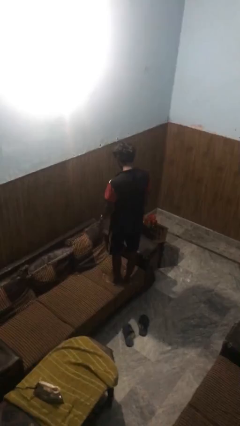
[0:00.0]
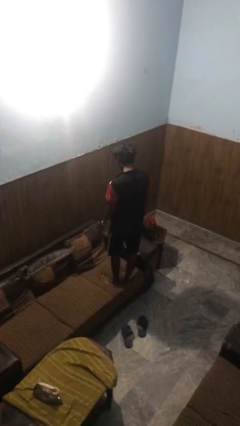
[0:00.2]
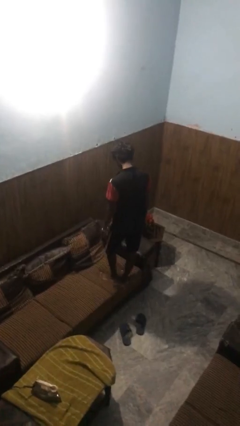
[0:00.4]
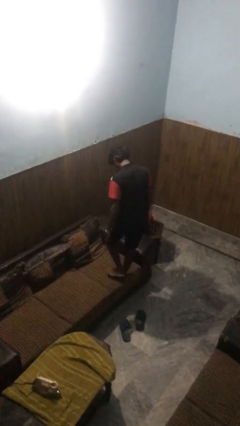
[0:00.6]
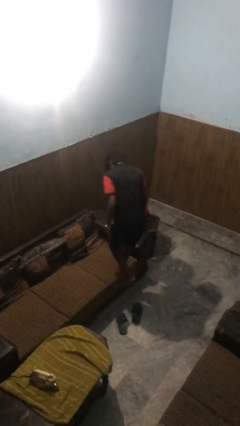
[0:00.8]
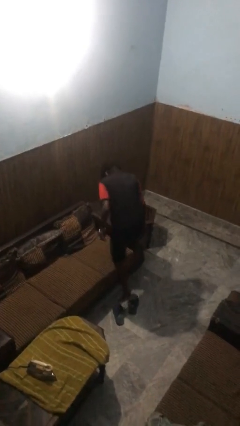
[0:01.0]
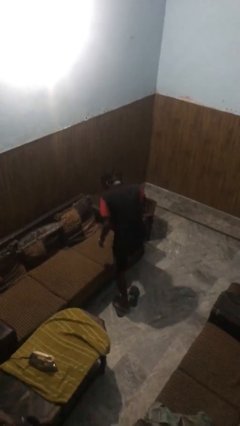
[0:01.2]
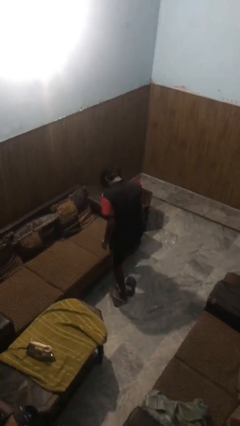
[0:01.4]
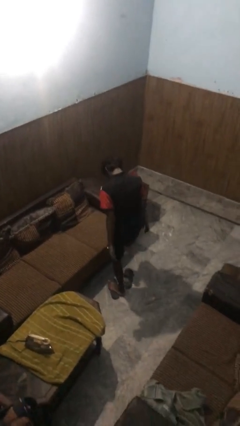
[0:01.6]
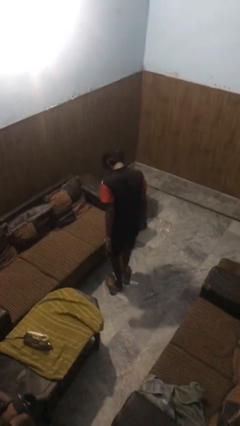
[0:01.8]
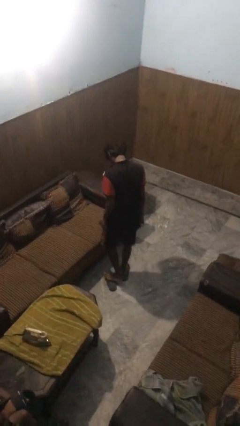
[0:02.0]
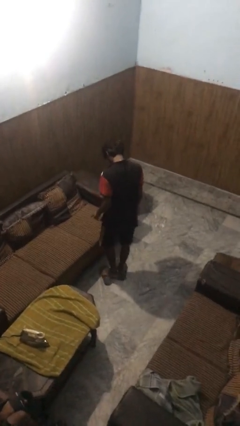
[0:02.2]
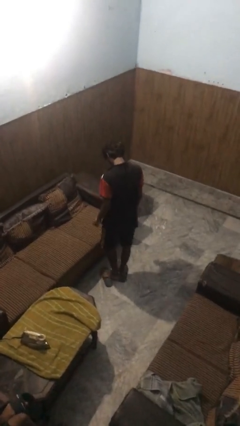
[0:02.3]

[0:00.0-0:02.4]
person climbs off couch

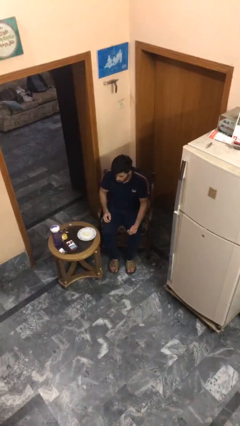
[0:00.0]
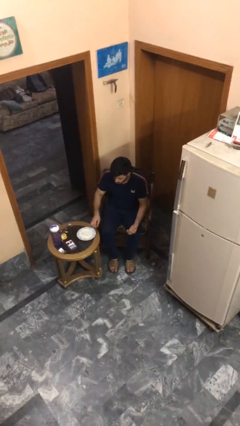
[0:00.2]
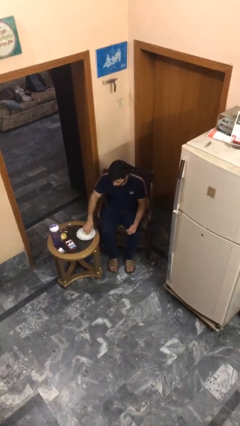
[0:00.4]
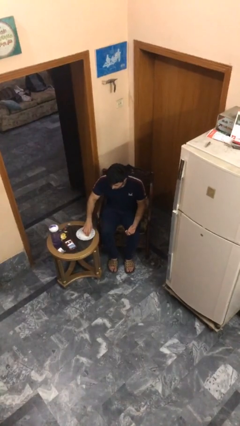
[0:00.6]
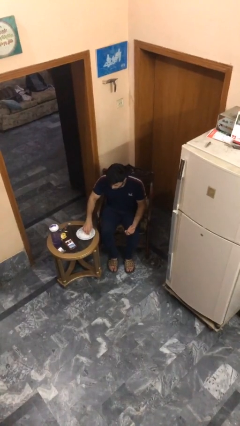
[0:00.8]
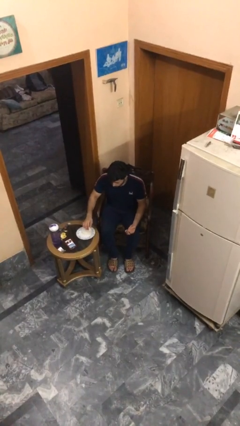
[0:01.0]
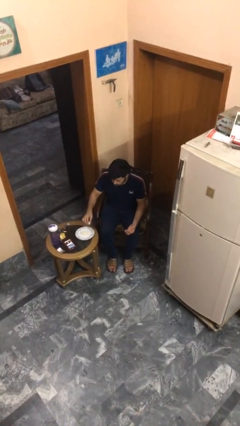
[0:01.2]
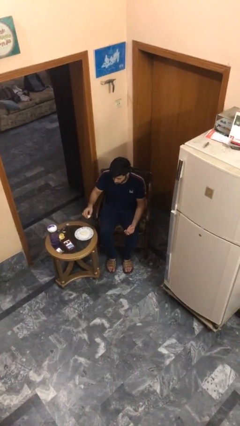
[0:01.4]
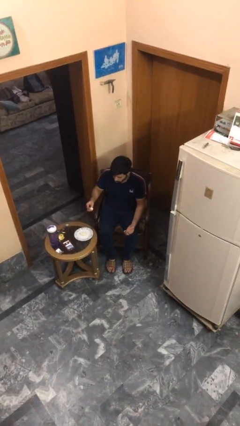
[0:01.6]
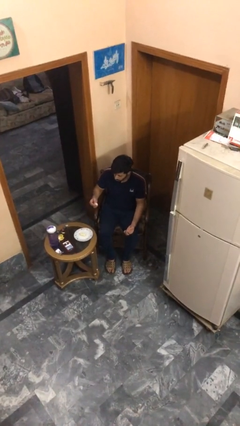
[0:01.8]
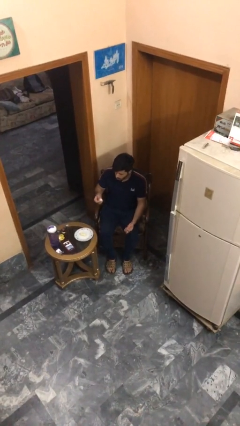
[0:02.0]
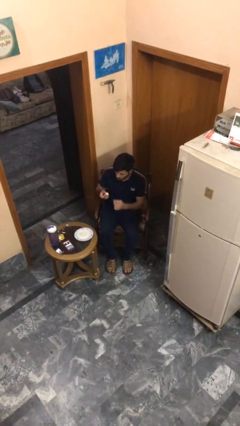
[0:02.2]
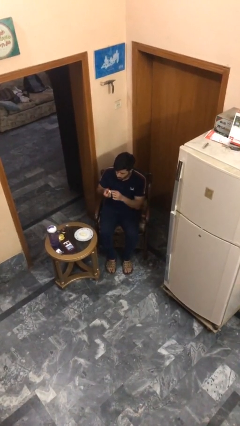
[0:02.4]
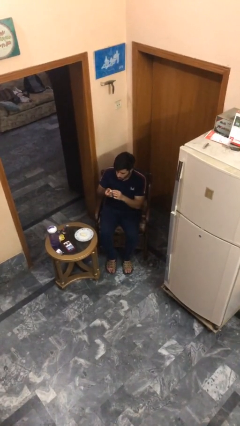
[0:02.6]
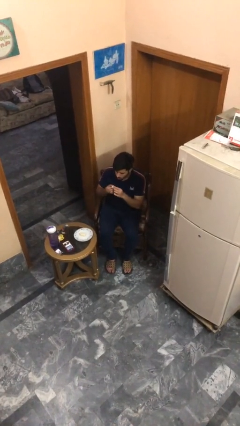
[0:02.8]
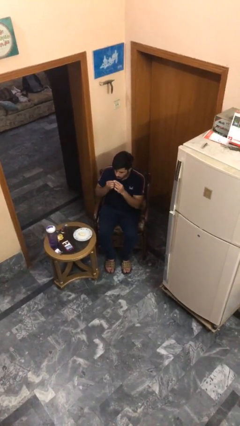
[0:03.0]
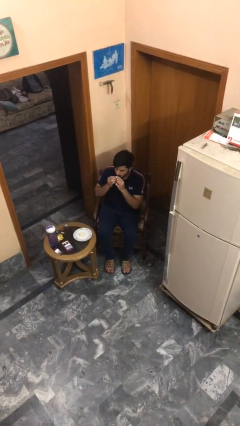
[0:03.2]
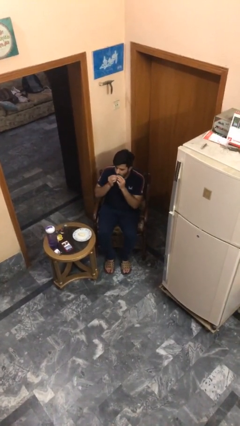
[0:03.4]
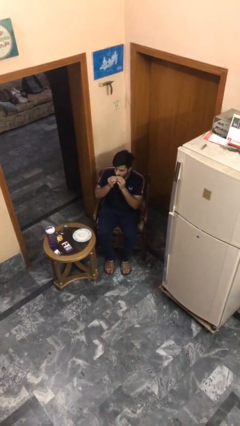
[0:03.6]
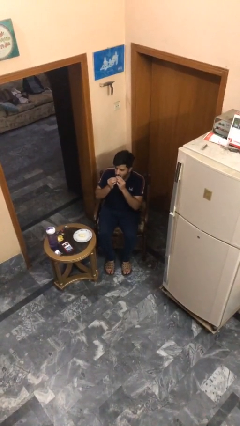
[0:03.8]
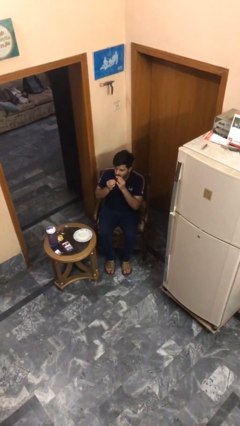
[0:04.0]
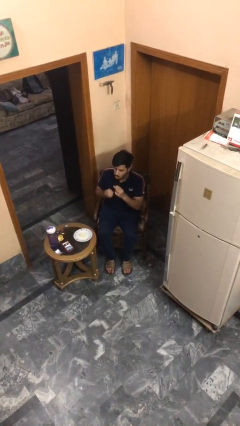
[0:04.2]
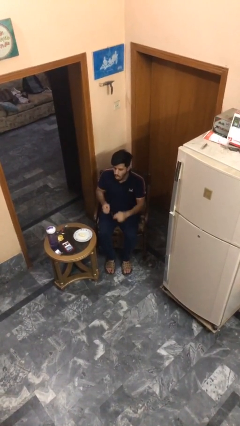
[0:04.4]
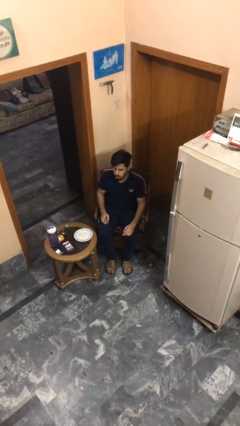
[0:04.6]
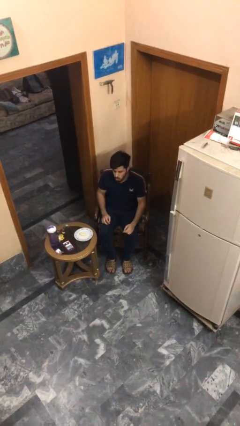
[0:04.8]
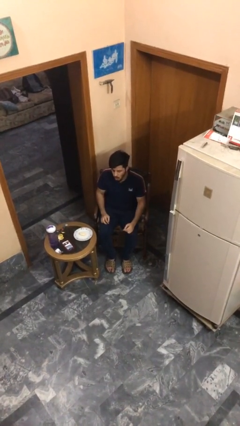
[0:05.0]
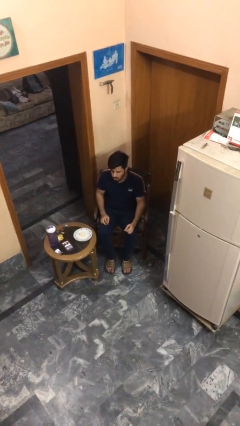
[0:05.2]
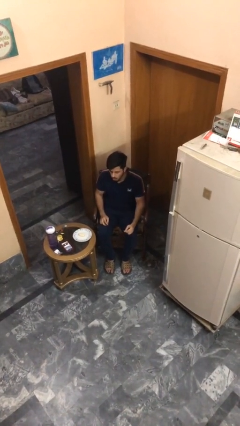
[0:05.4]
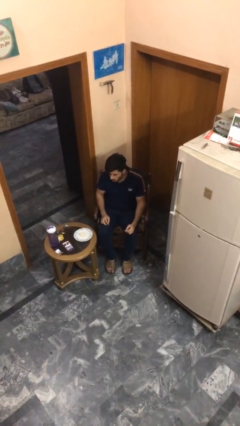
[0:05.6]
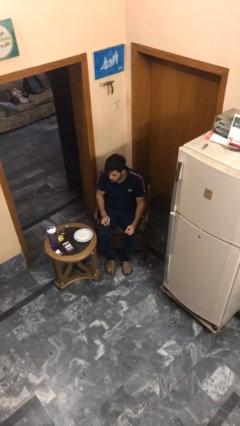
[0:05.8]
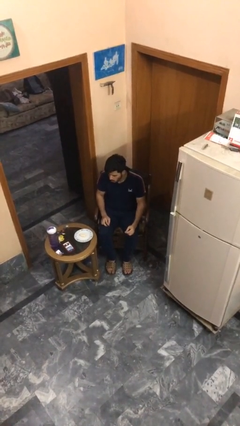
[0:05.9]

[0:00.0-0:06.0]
person eats with hands

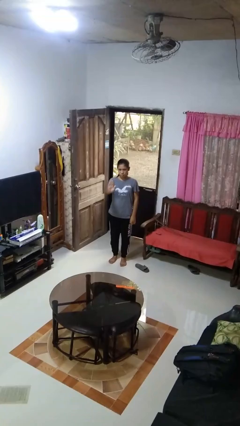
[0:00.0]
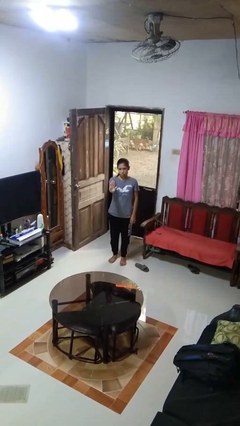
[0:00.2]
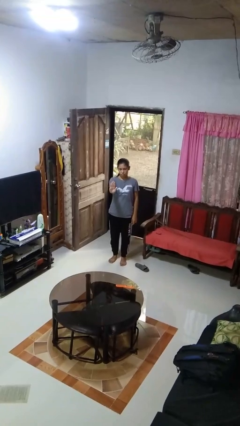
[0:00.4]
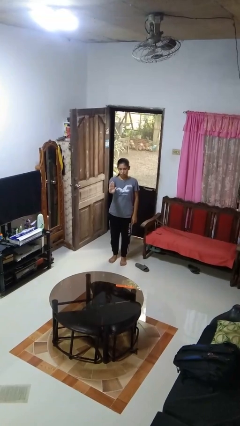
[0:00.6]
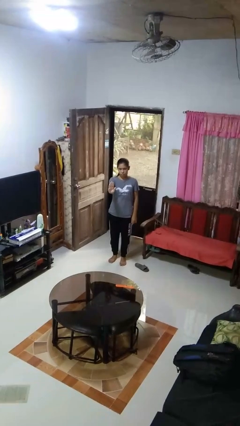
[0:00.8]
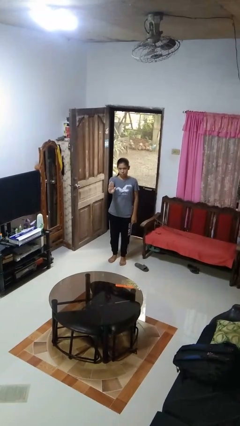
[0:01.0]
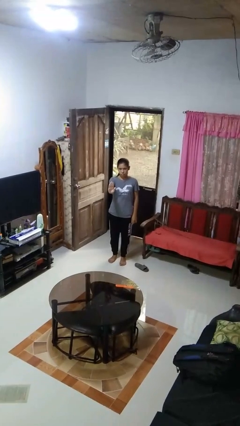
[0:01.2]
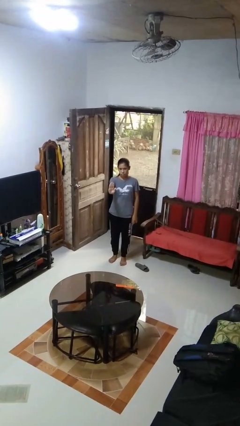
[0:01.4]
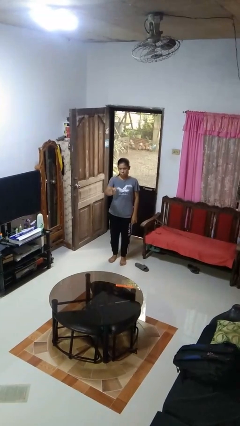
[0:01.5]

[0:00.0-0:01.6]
person gestures stop

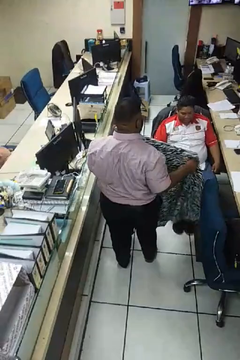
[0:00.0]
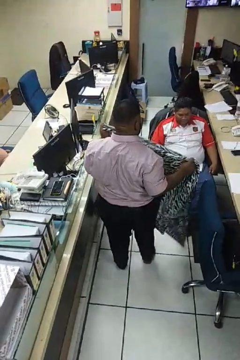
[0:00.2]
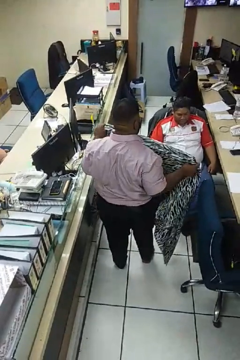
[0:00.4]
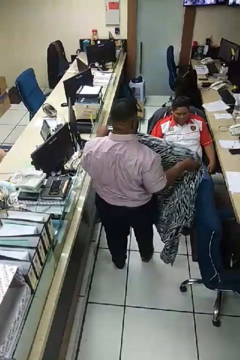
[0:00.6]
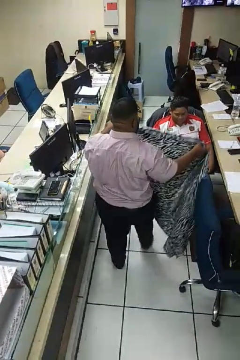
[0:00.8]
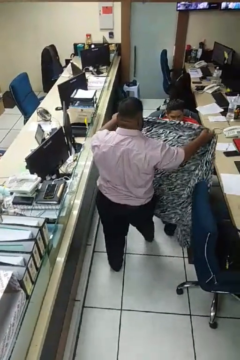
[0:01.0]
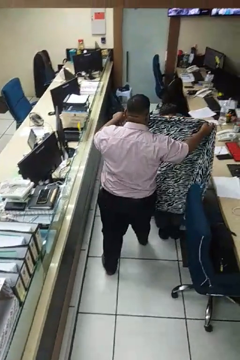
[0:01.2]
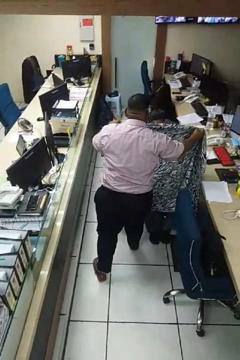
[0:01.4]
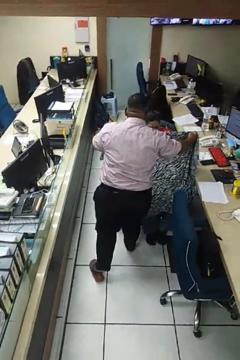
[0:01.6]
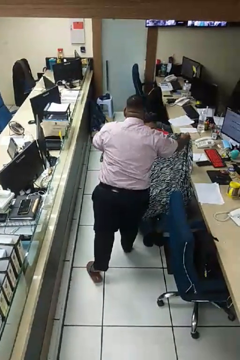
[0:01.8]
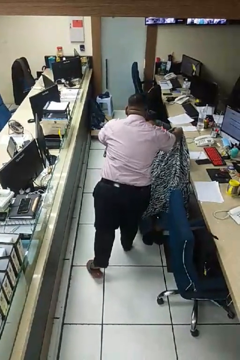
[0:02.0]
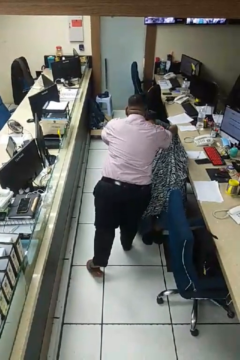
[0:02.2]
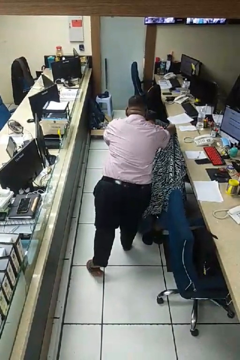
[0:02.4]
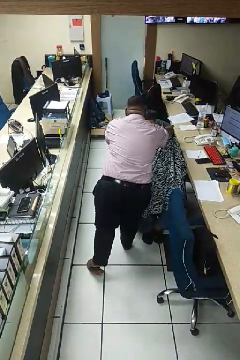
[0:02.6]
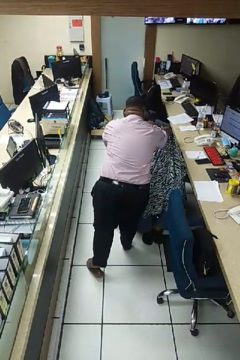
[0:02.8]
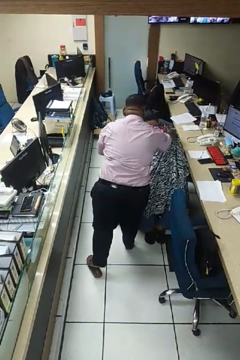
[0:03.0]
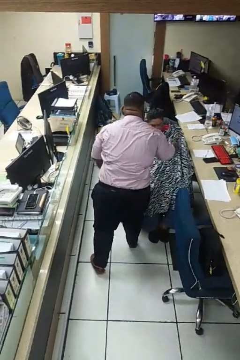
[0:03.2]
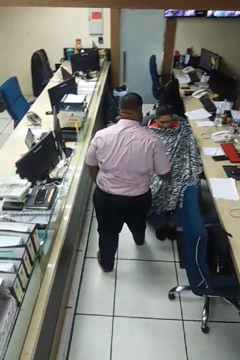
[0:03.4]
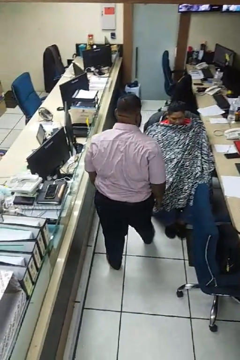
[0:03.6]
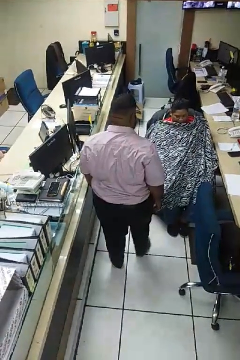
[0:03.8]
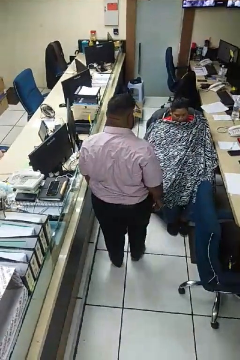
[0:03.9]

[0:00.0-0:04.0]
person covers friend with blanket

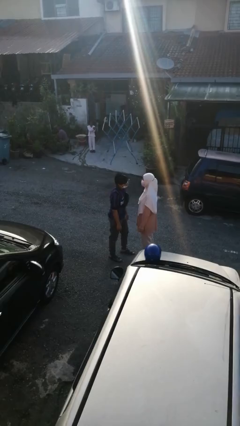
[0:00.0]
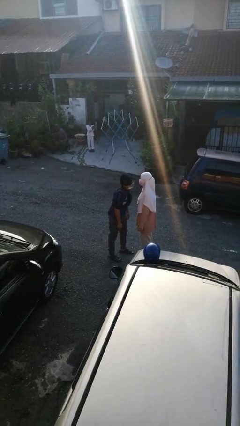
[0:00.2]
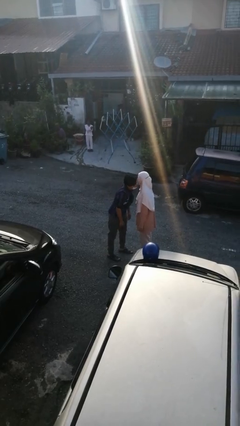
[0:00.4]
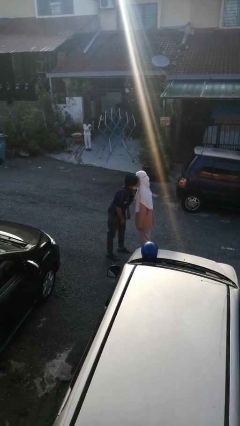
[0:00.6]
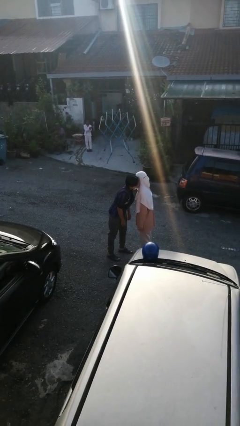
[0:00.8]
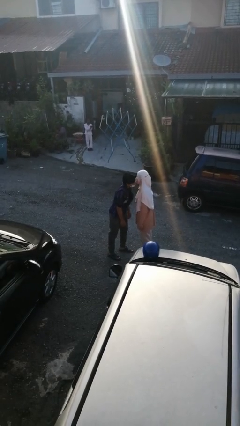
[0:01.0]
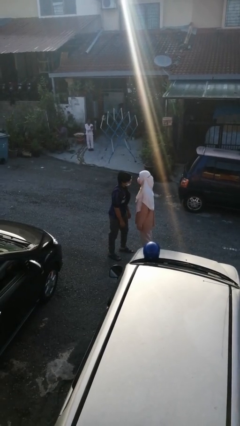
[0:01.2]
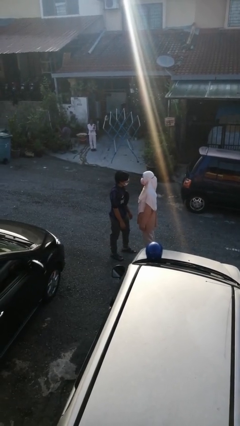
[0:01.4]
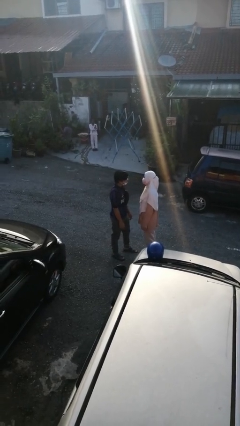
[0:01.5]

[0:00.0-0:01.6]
person kisses cheek of person

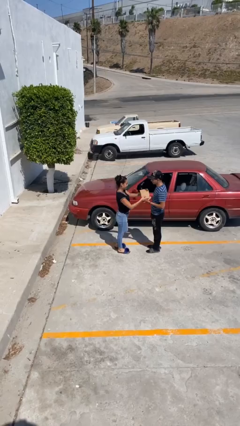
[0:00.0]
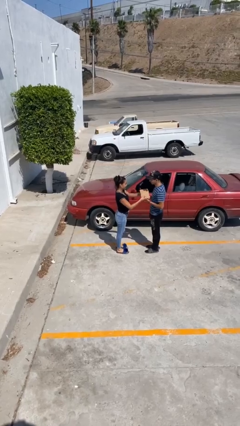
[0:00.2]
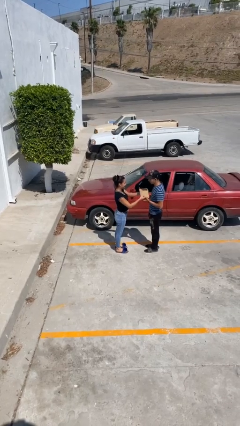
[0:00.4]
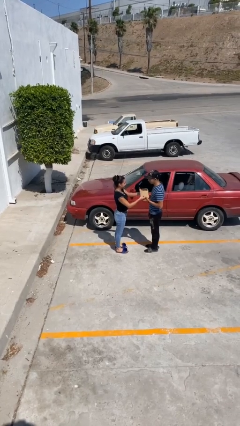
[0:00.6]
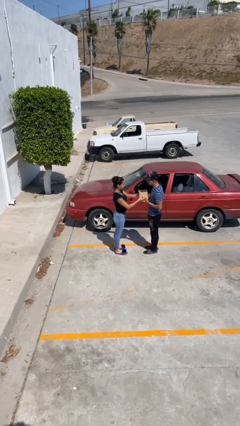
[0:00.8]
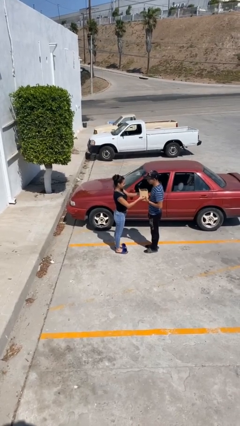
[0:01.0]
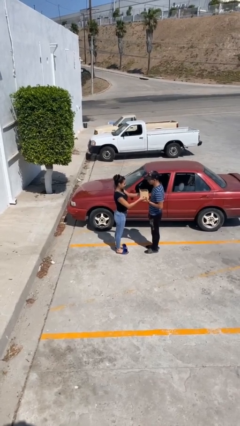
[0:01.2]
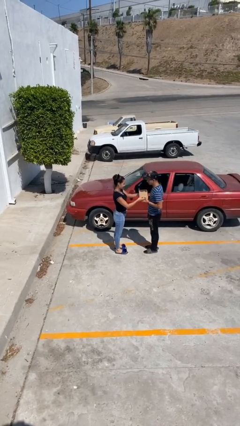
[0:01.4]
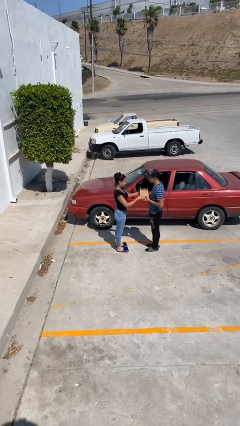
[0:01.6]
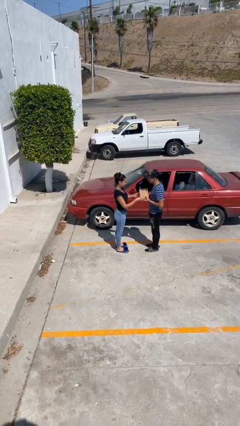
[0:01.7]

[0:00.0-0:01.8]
person transfers object to person

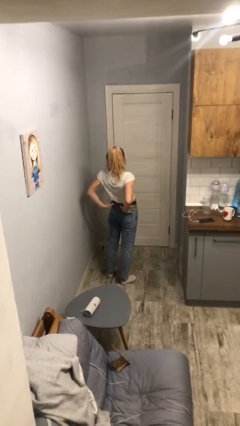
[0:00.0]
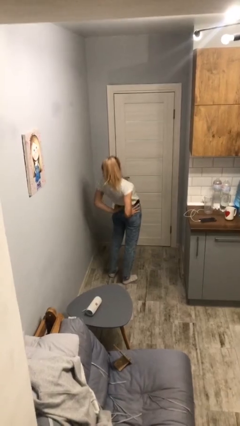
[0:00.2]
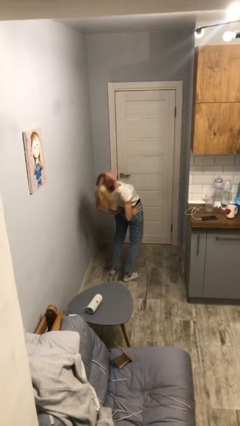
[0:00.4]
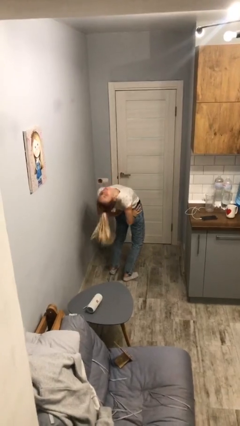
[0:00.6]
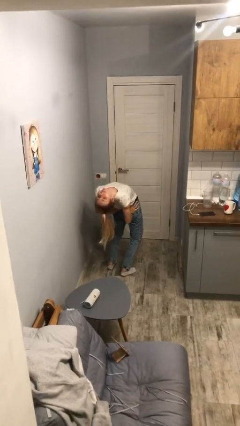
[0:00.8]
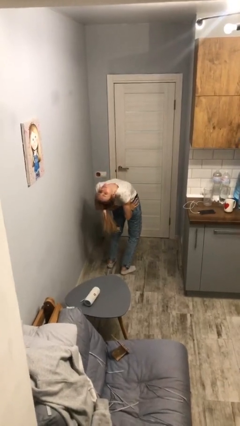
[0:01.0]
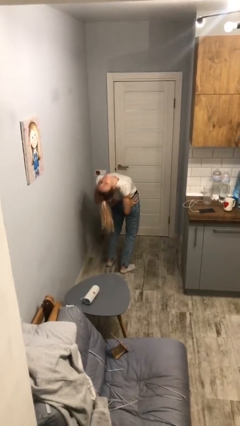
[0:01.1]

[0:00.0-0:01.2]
person stretches back
